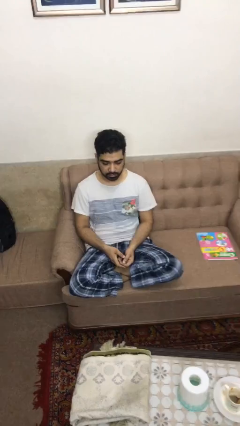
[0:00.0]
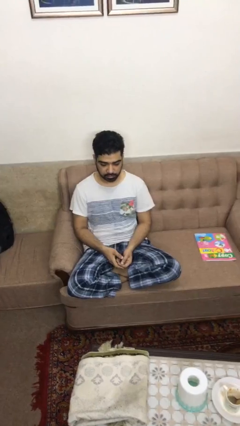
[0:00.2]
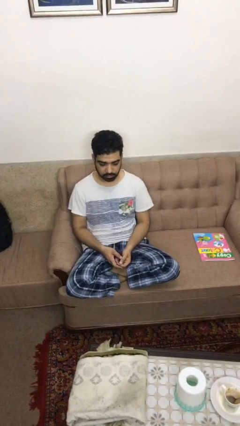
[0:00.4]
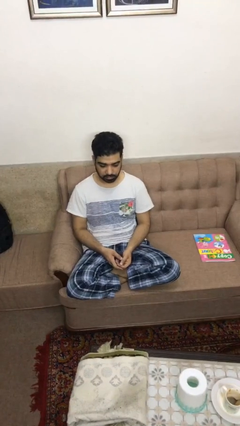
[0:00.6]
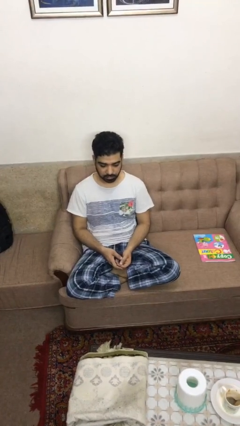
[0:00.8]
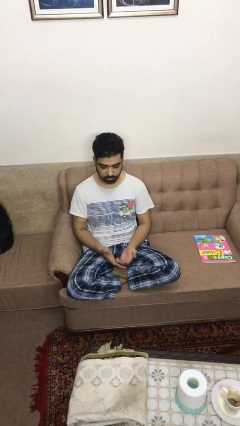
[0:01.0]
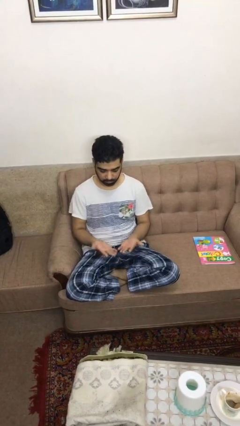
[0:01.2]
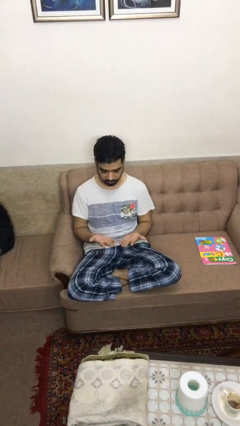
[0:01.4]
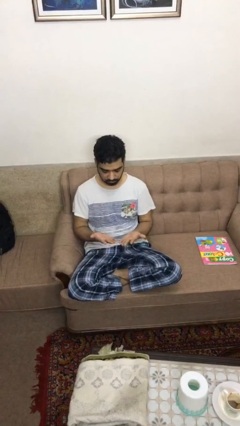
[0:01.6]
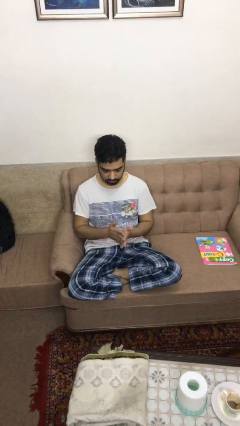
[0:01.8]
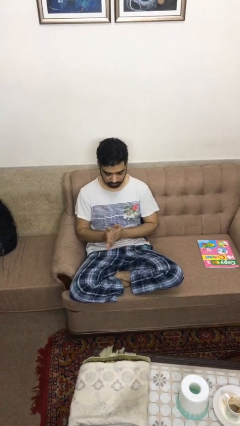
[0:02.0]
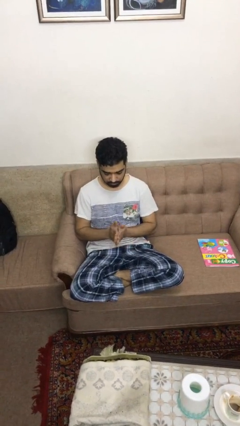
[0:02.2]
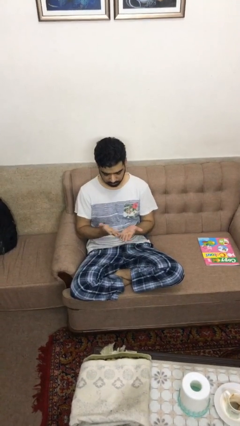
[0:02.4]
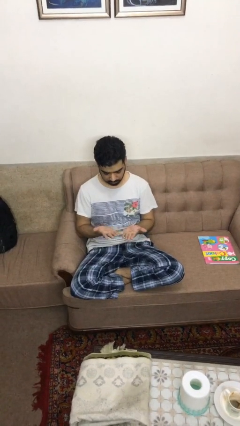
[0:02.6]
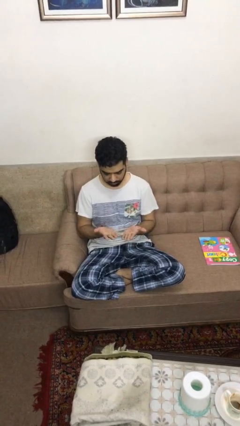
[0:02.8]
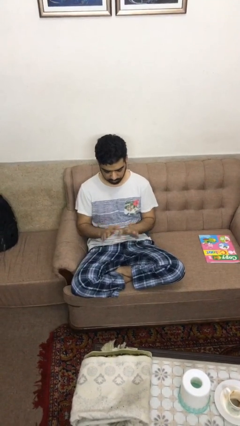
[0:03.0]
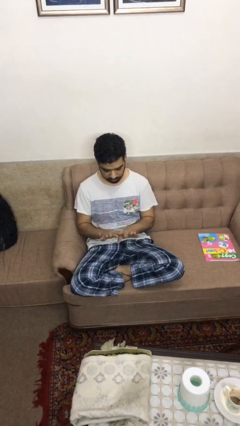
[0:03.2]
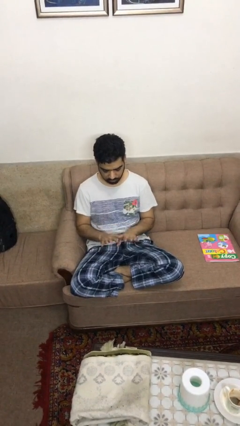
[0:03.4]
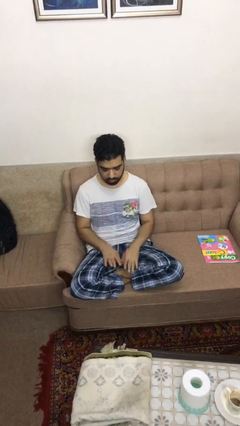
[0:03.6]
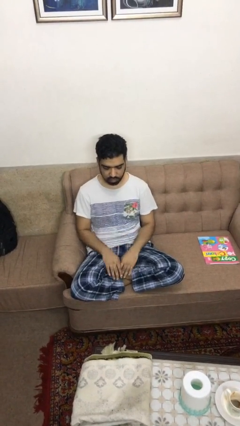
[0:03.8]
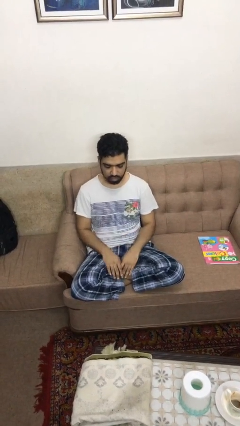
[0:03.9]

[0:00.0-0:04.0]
person looks at hands in lap

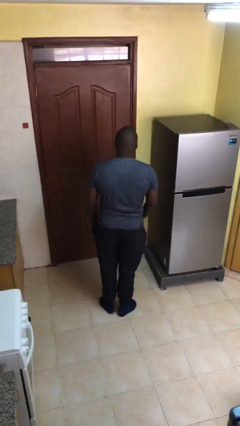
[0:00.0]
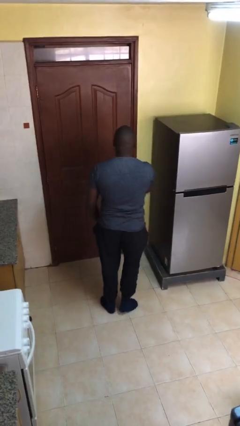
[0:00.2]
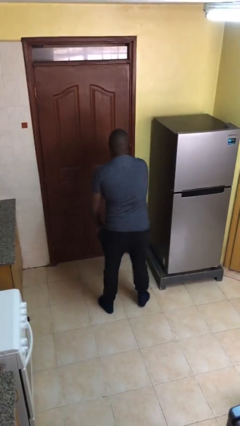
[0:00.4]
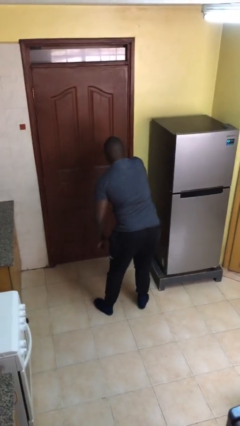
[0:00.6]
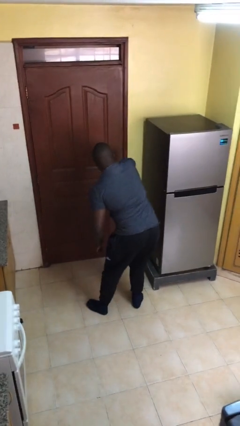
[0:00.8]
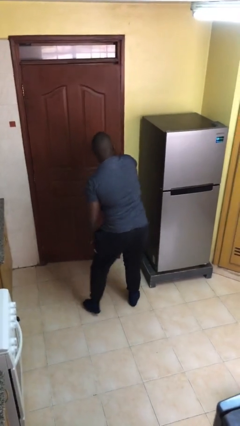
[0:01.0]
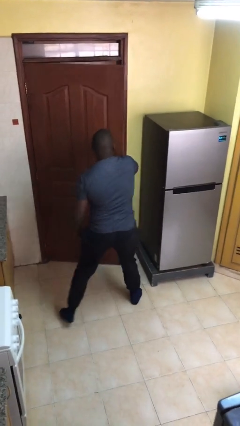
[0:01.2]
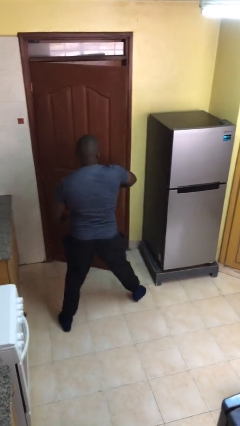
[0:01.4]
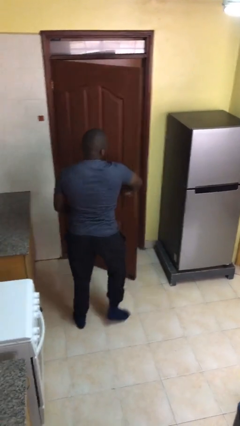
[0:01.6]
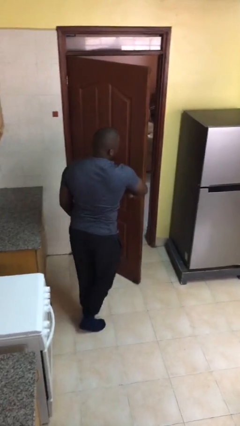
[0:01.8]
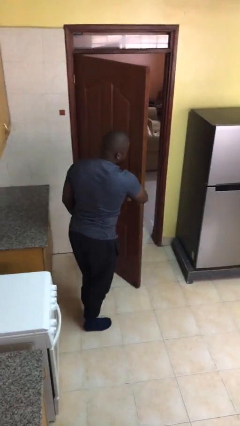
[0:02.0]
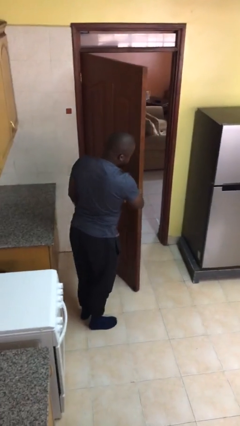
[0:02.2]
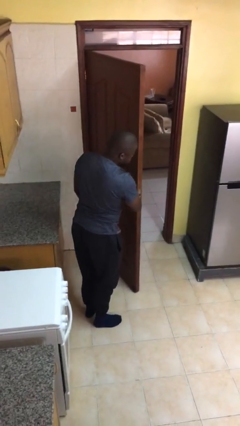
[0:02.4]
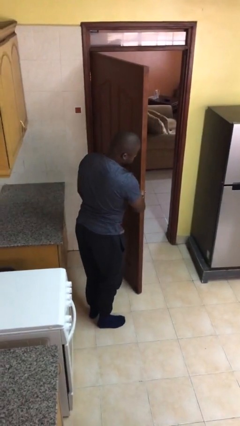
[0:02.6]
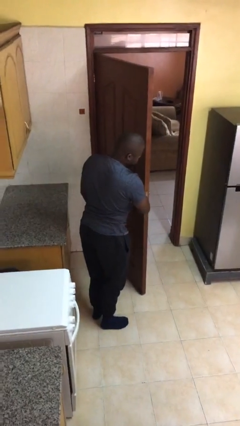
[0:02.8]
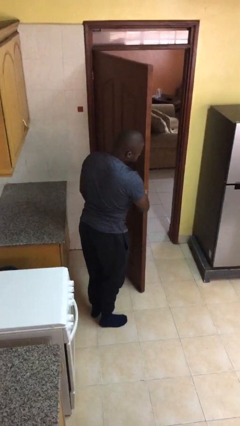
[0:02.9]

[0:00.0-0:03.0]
person opens facility door

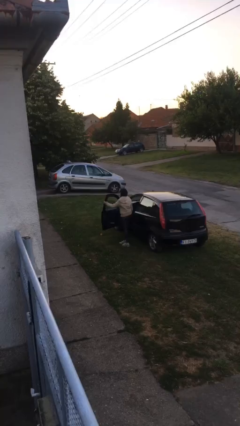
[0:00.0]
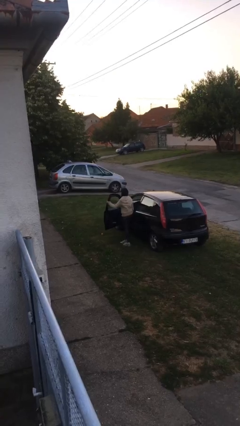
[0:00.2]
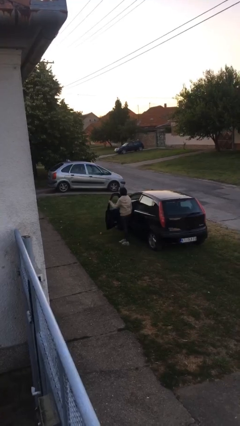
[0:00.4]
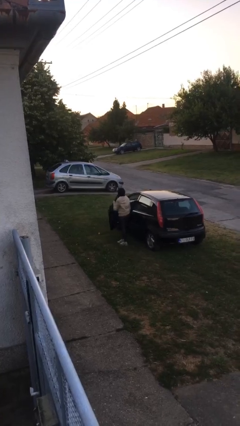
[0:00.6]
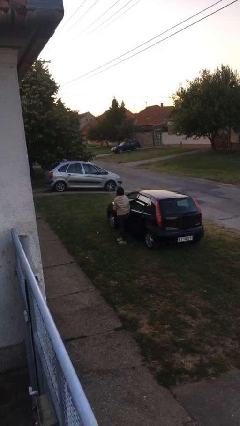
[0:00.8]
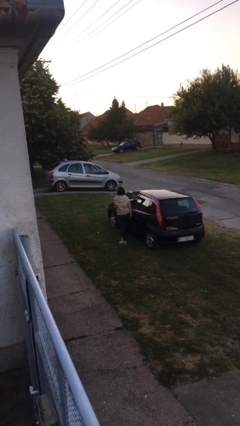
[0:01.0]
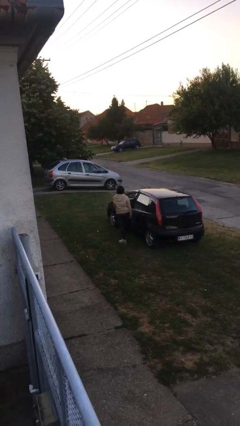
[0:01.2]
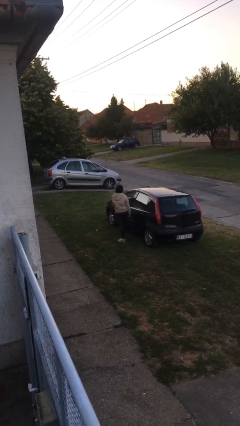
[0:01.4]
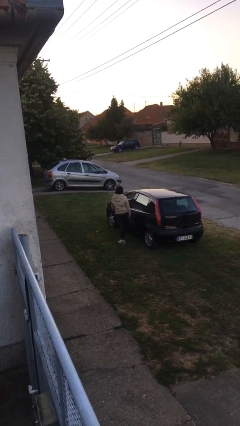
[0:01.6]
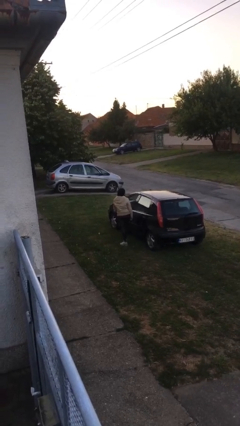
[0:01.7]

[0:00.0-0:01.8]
person closes car door

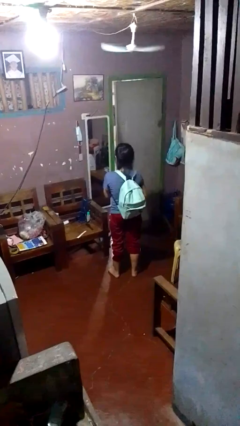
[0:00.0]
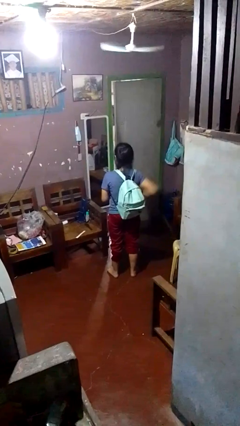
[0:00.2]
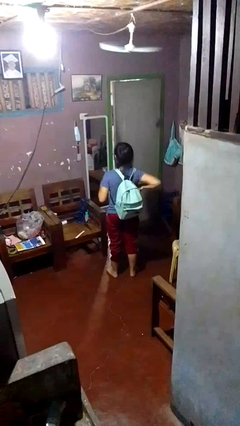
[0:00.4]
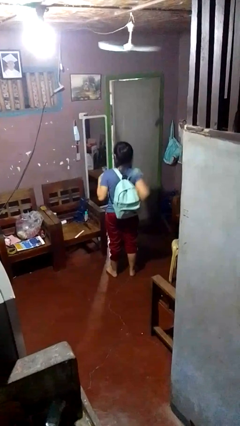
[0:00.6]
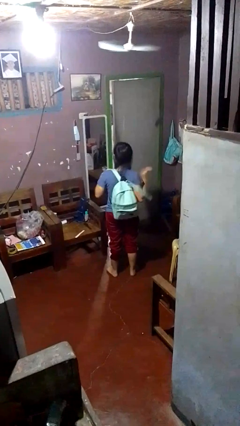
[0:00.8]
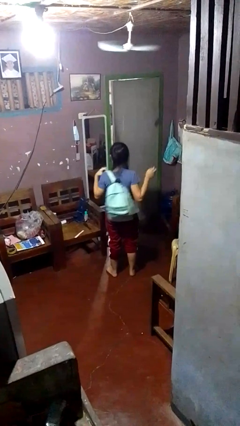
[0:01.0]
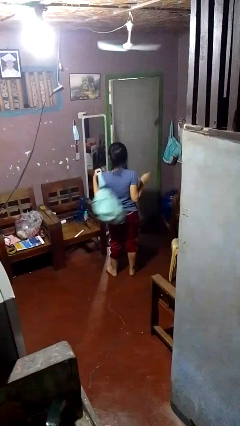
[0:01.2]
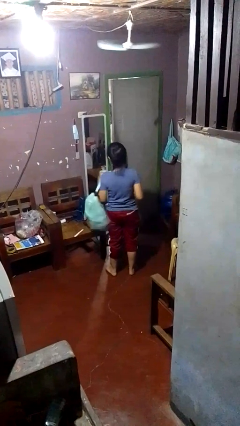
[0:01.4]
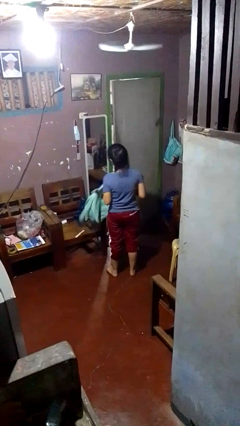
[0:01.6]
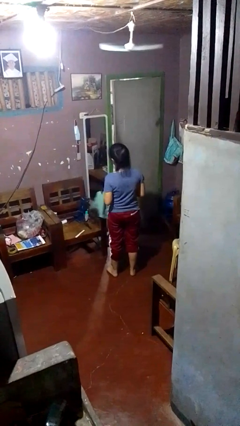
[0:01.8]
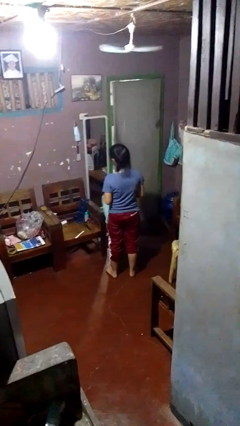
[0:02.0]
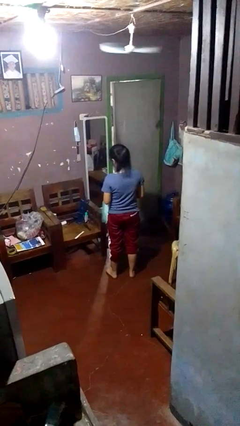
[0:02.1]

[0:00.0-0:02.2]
person takes off backpack

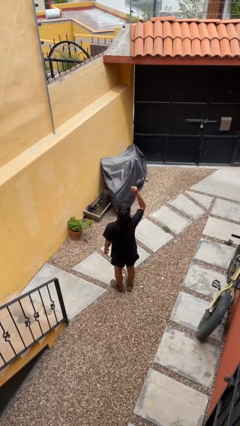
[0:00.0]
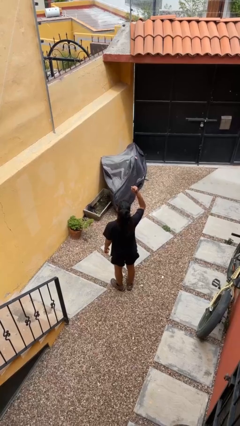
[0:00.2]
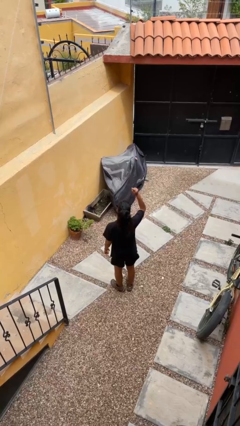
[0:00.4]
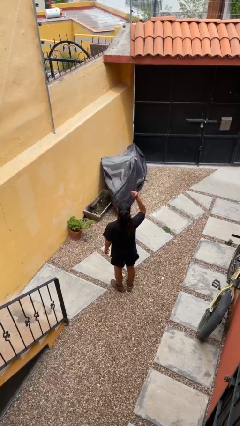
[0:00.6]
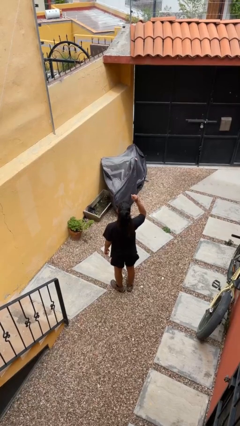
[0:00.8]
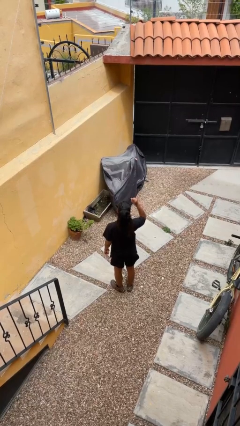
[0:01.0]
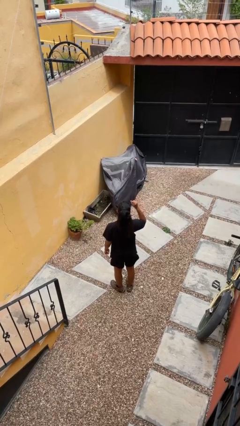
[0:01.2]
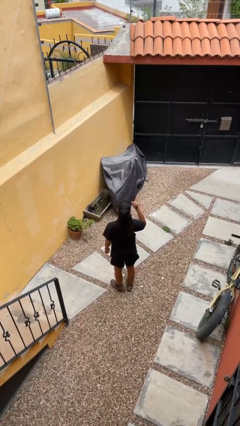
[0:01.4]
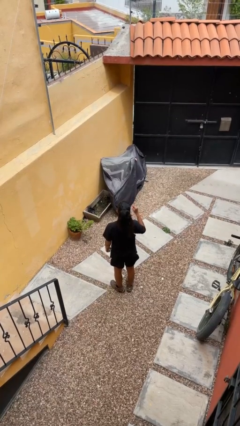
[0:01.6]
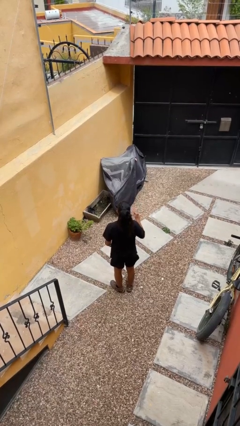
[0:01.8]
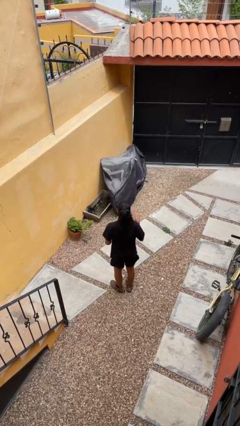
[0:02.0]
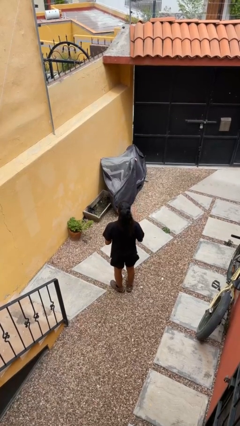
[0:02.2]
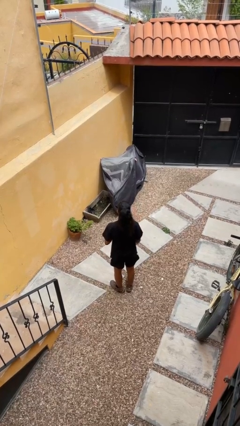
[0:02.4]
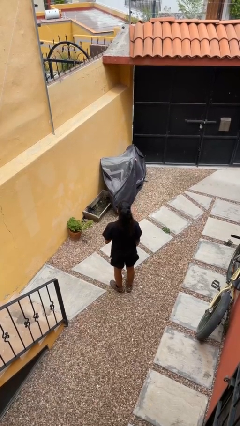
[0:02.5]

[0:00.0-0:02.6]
person gestures lower hand

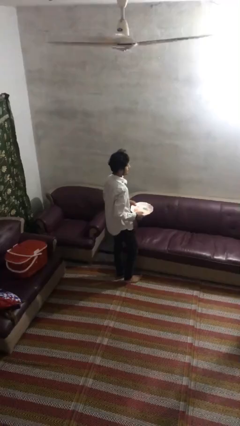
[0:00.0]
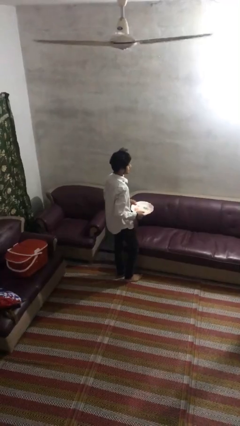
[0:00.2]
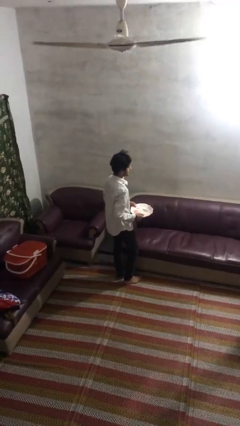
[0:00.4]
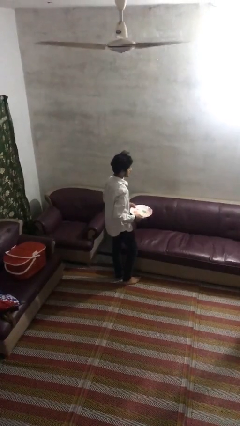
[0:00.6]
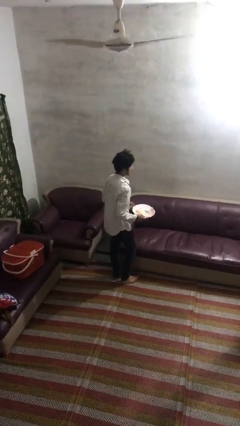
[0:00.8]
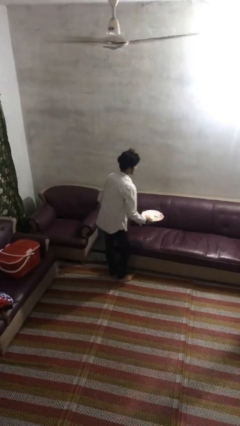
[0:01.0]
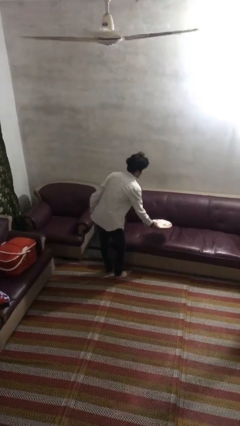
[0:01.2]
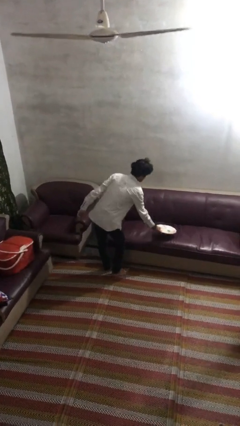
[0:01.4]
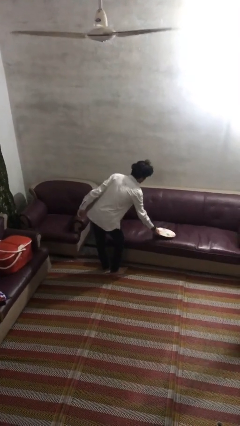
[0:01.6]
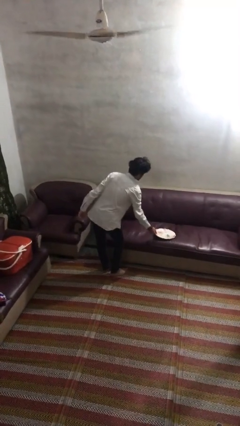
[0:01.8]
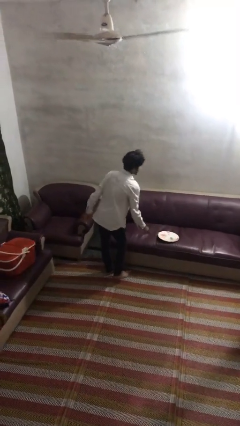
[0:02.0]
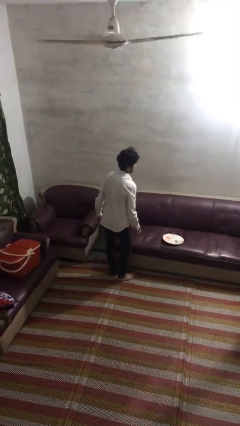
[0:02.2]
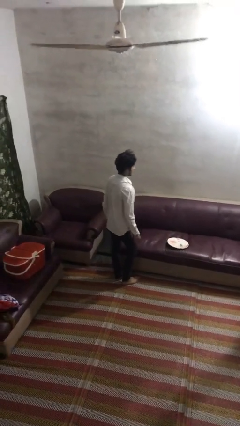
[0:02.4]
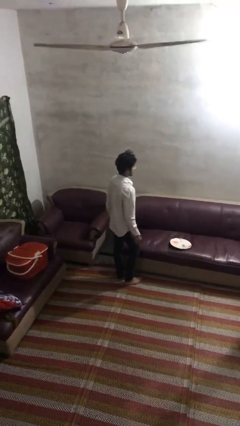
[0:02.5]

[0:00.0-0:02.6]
person puts down object on couch

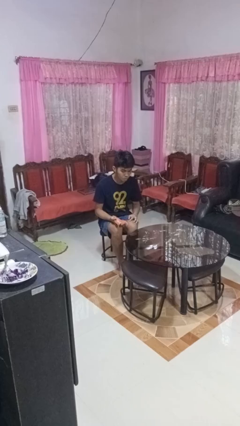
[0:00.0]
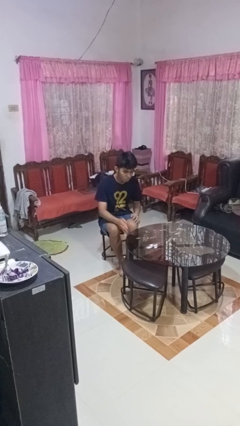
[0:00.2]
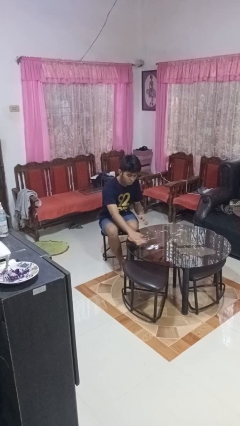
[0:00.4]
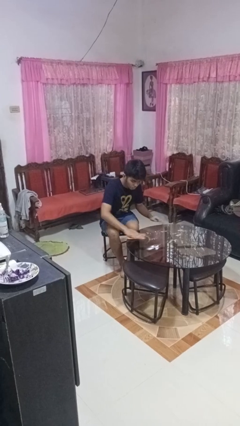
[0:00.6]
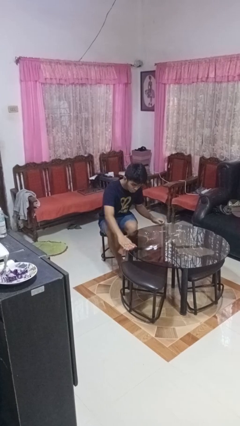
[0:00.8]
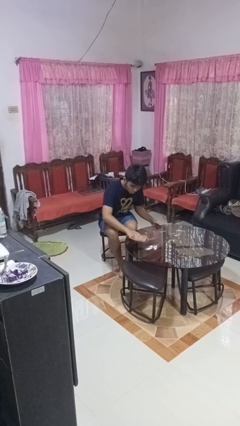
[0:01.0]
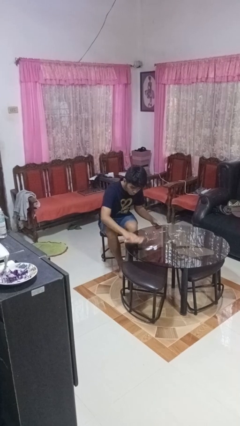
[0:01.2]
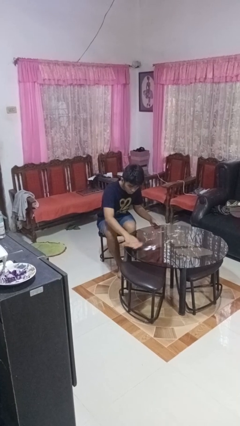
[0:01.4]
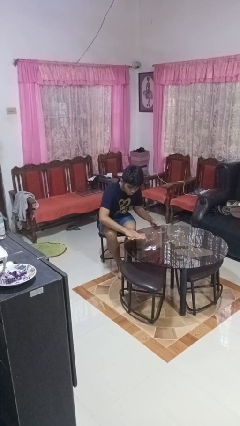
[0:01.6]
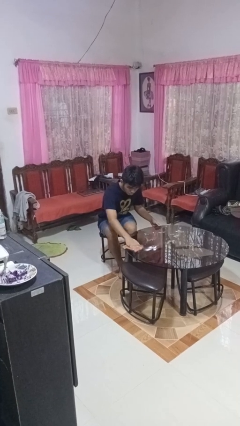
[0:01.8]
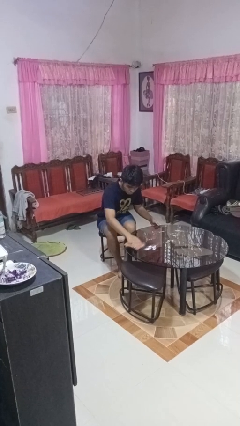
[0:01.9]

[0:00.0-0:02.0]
person cleans table with rag
